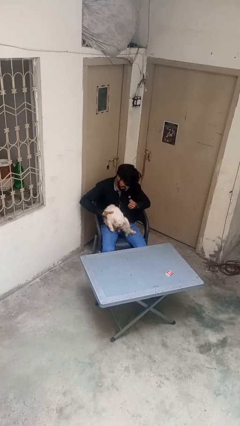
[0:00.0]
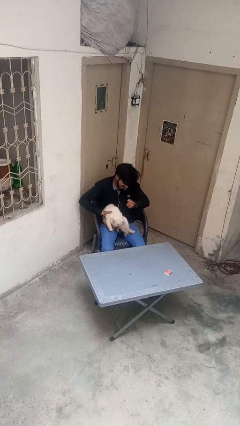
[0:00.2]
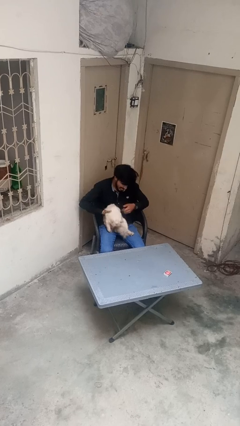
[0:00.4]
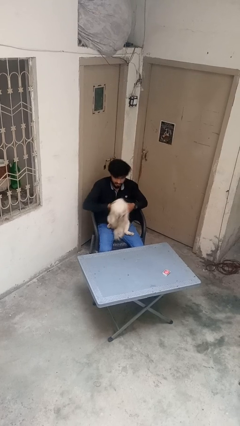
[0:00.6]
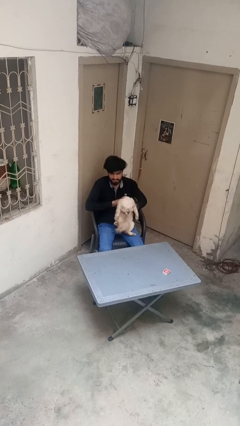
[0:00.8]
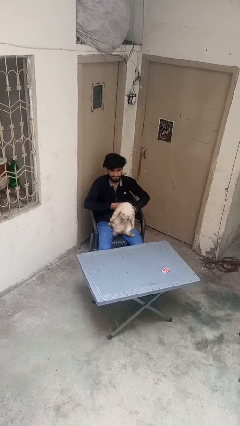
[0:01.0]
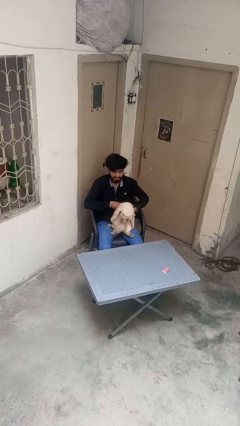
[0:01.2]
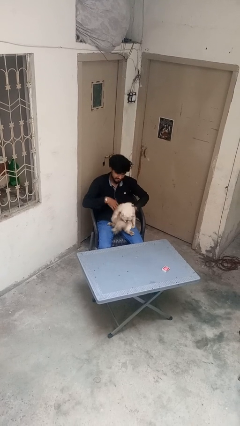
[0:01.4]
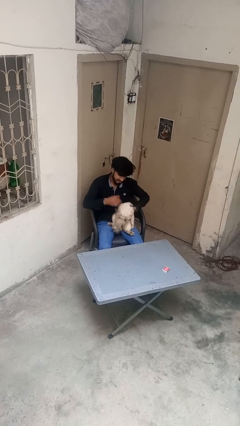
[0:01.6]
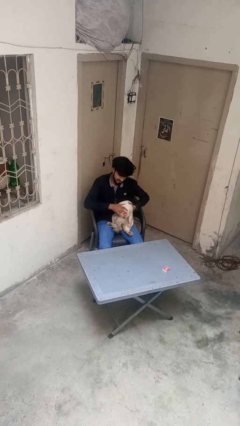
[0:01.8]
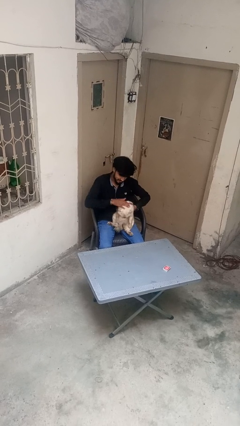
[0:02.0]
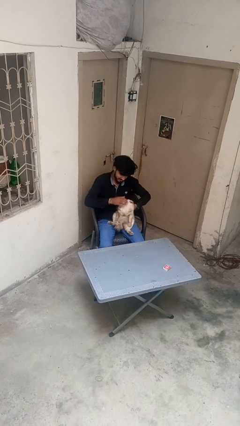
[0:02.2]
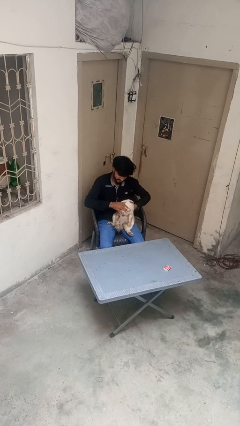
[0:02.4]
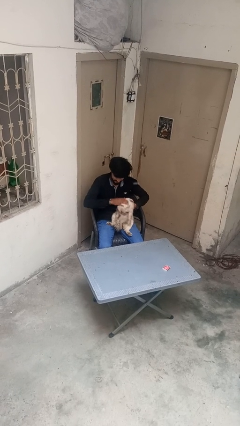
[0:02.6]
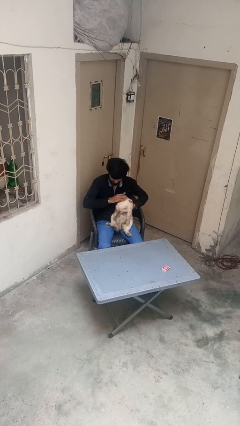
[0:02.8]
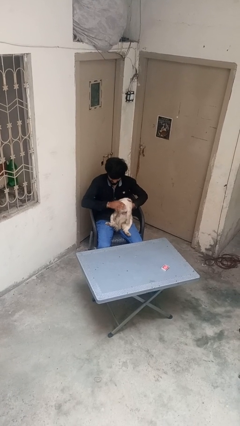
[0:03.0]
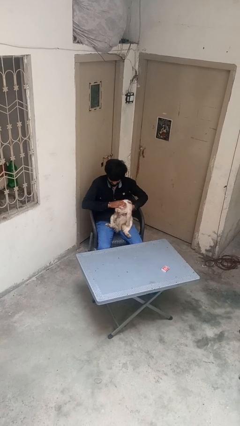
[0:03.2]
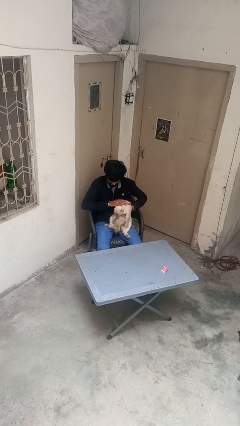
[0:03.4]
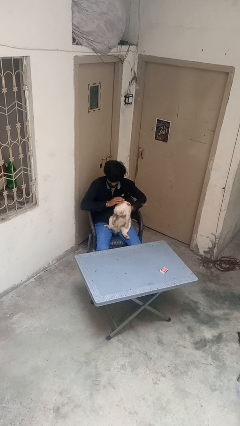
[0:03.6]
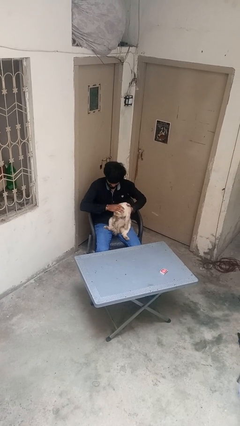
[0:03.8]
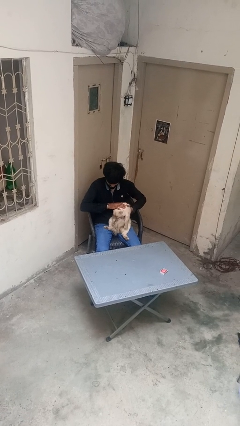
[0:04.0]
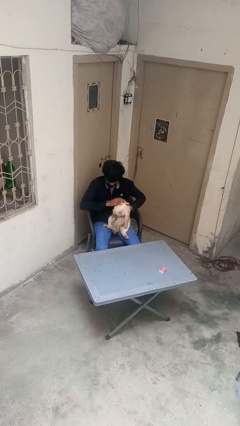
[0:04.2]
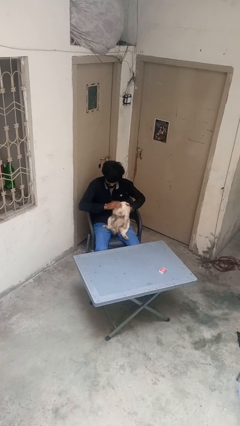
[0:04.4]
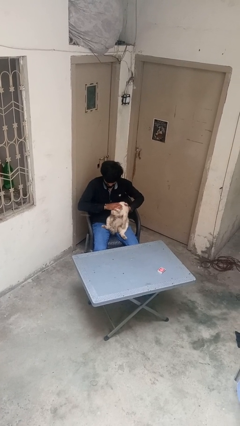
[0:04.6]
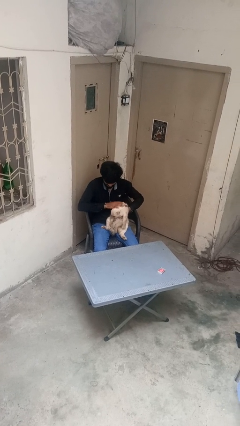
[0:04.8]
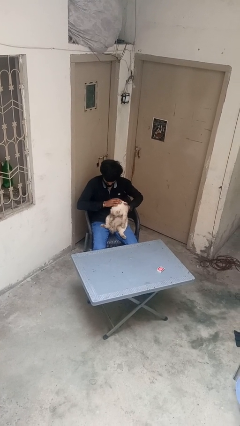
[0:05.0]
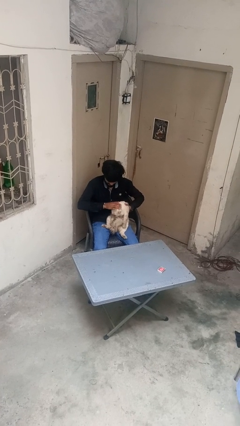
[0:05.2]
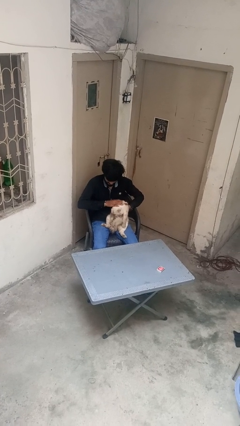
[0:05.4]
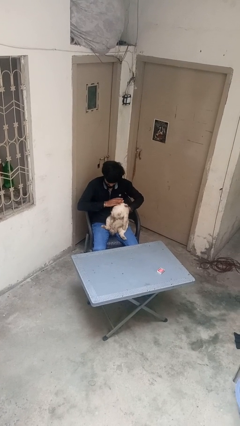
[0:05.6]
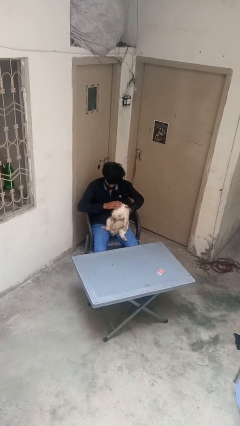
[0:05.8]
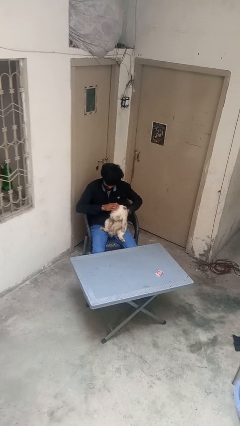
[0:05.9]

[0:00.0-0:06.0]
person pets cat

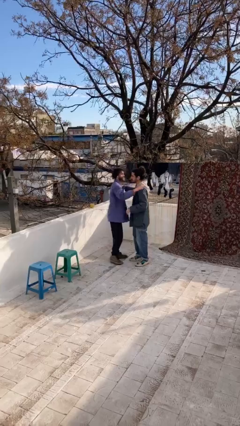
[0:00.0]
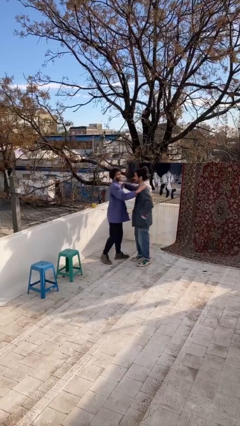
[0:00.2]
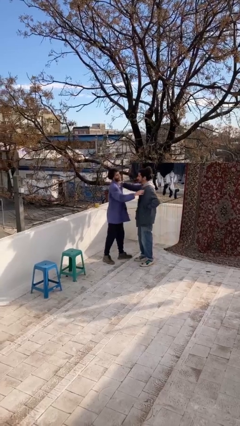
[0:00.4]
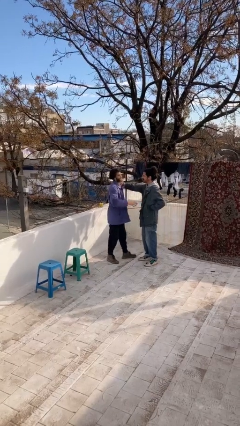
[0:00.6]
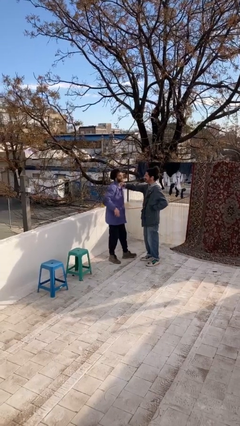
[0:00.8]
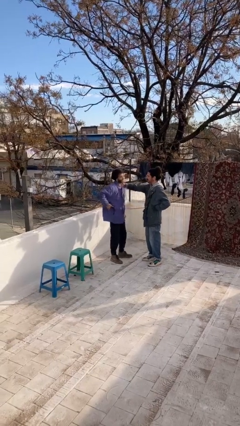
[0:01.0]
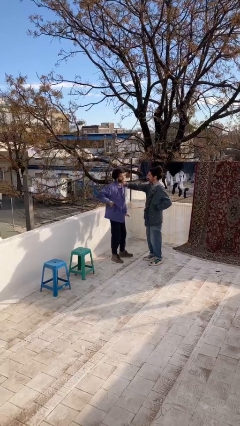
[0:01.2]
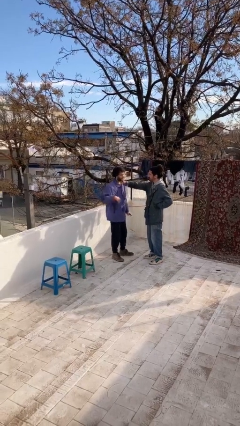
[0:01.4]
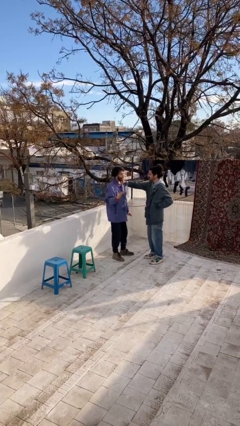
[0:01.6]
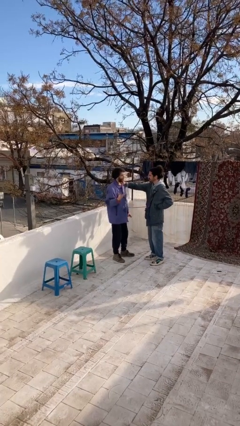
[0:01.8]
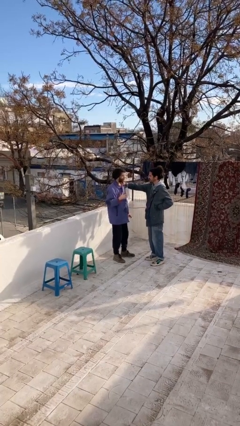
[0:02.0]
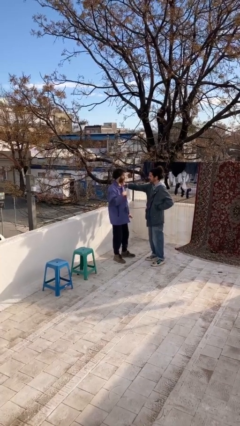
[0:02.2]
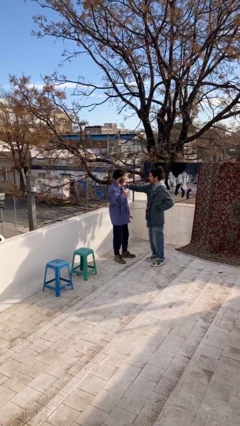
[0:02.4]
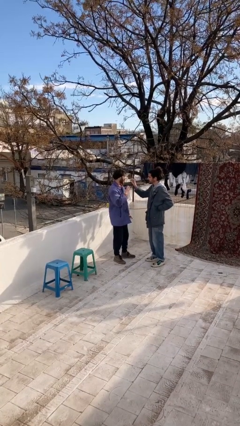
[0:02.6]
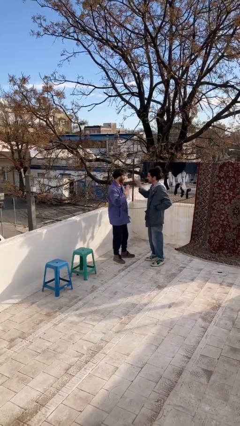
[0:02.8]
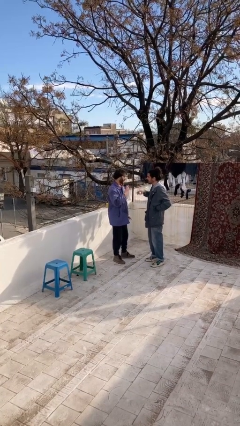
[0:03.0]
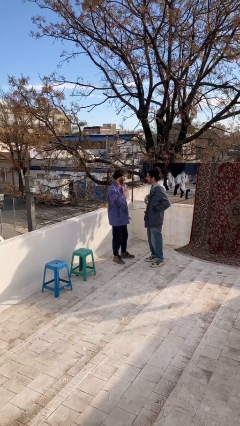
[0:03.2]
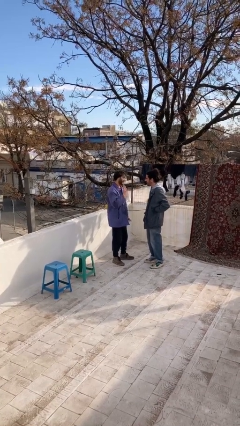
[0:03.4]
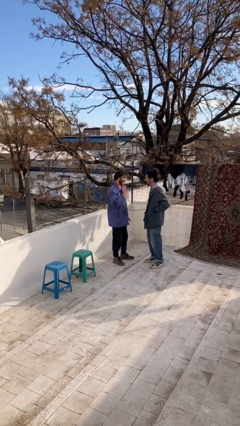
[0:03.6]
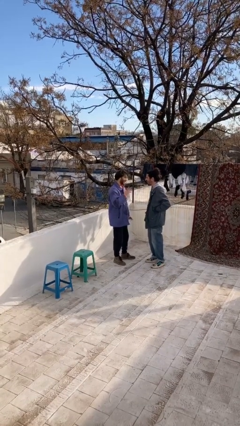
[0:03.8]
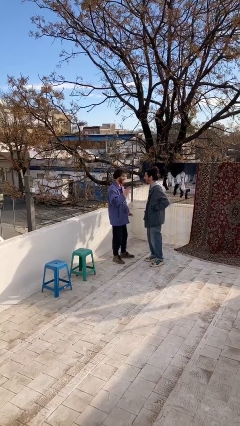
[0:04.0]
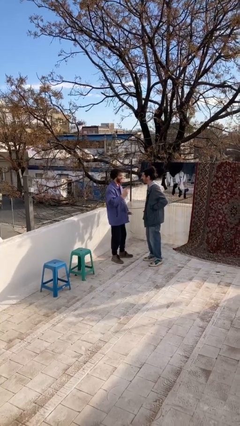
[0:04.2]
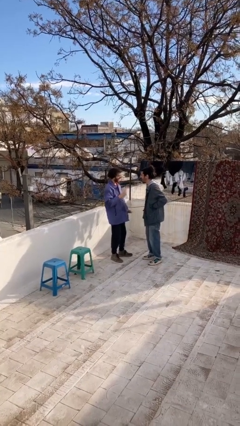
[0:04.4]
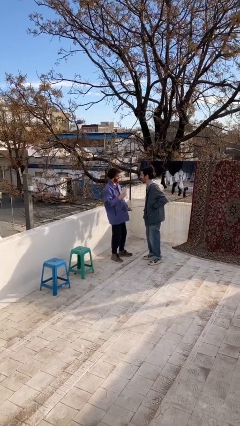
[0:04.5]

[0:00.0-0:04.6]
person talks to person

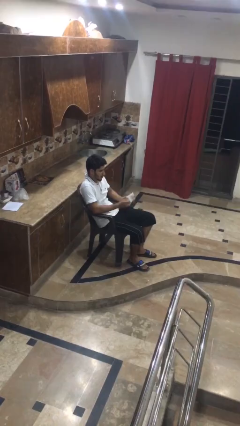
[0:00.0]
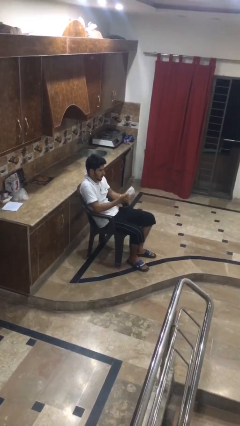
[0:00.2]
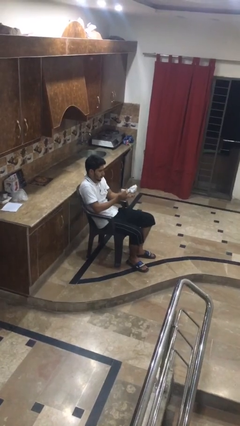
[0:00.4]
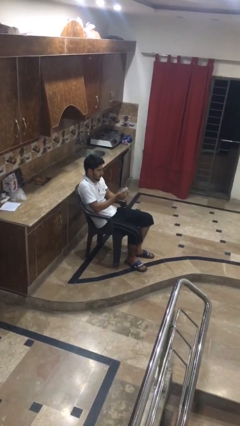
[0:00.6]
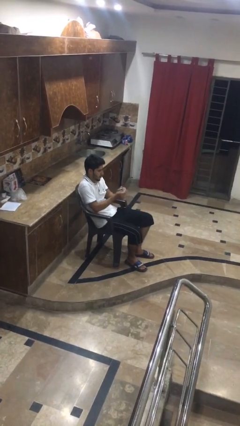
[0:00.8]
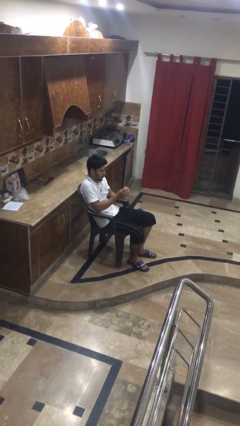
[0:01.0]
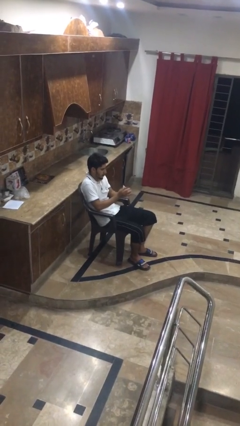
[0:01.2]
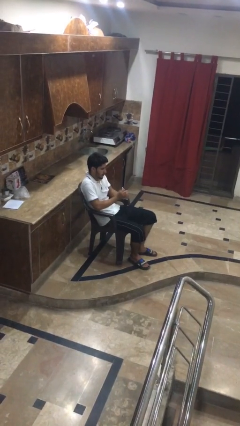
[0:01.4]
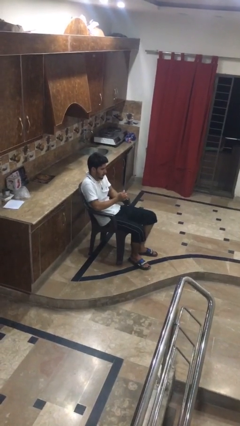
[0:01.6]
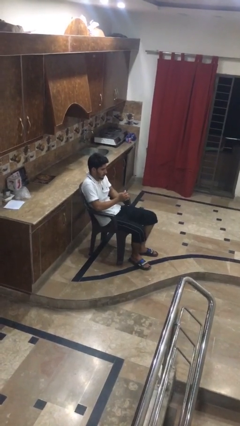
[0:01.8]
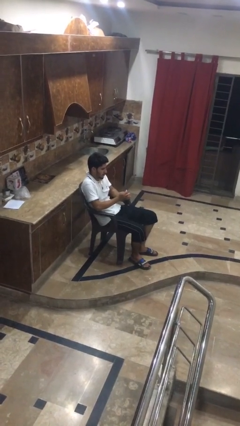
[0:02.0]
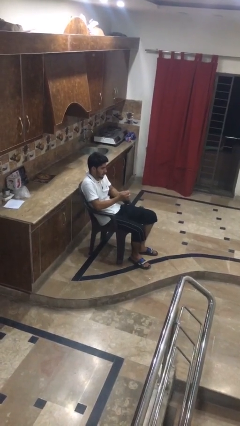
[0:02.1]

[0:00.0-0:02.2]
person crumples paper

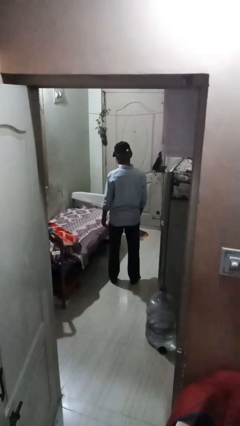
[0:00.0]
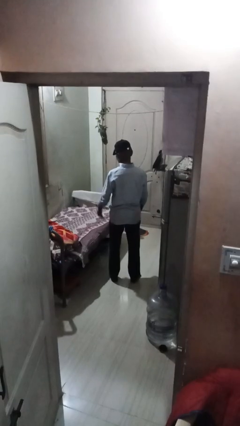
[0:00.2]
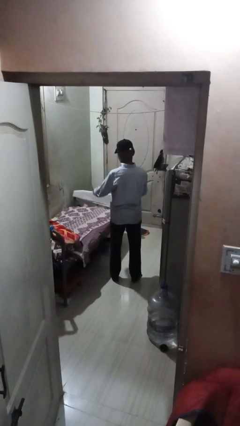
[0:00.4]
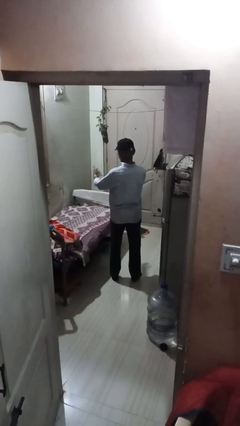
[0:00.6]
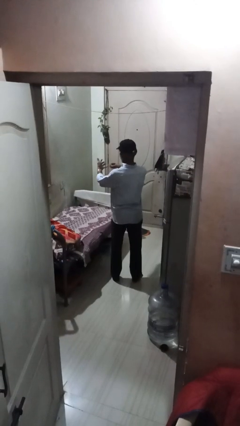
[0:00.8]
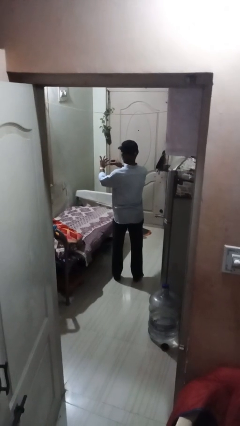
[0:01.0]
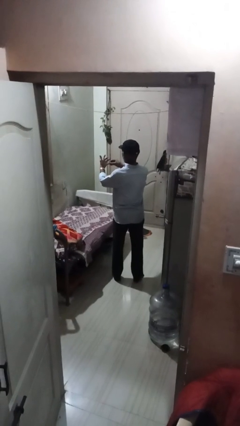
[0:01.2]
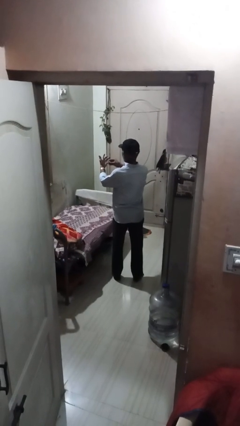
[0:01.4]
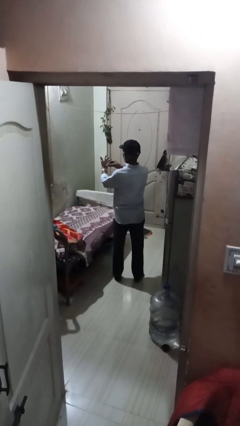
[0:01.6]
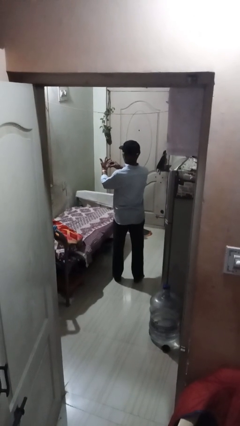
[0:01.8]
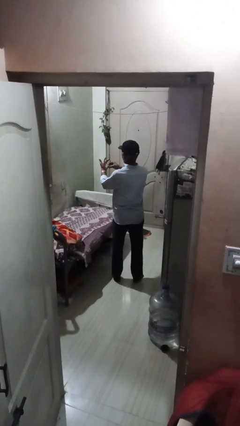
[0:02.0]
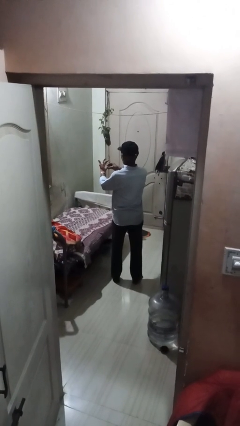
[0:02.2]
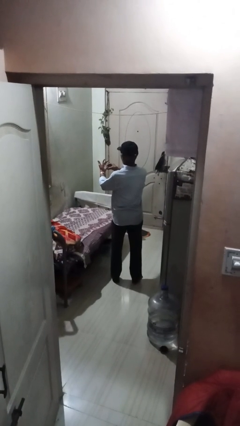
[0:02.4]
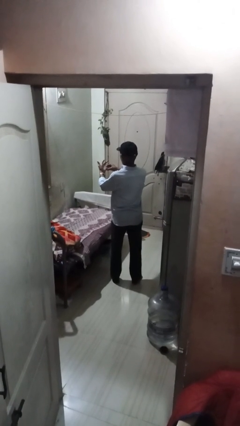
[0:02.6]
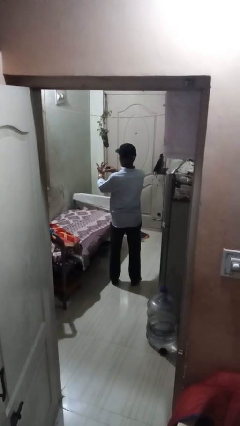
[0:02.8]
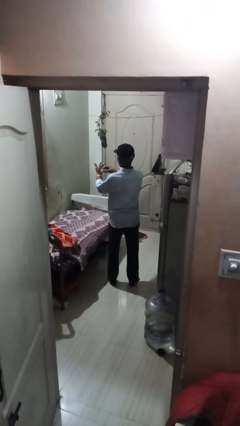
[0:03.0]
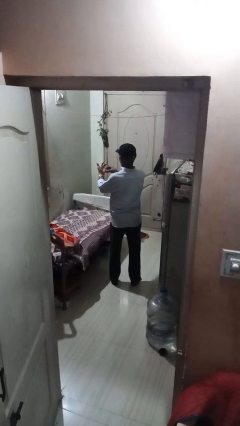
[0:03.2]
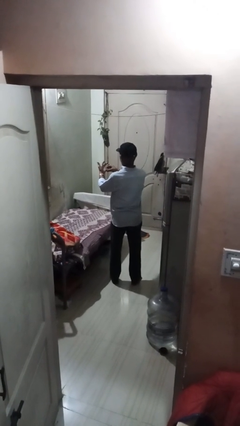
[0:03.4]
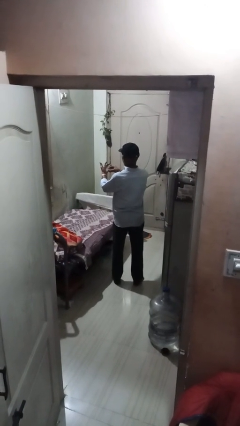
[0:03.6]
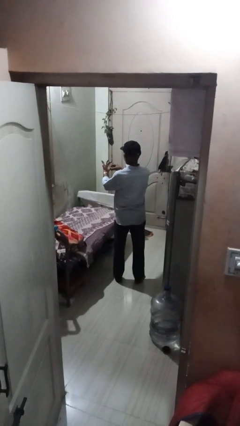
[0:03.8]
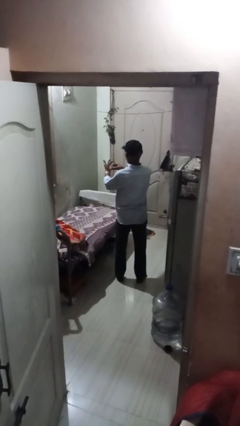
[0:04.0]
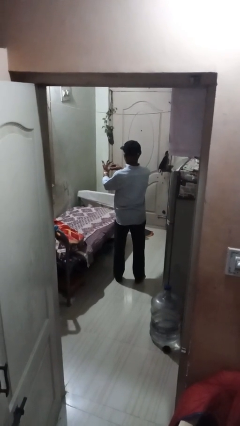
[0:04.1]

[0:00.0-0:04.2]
person puts on ring

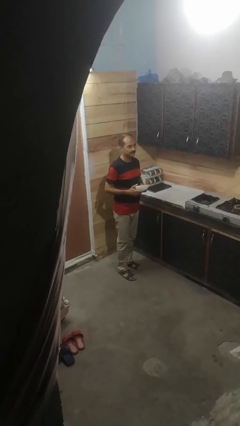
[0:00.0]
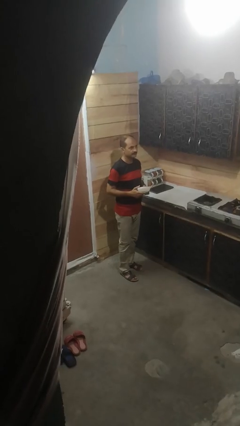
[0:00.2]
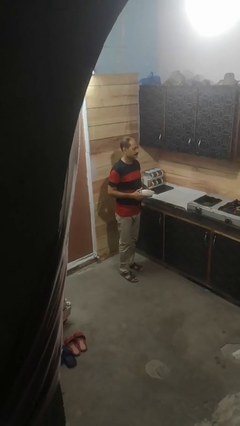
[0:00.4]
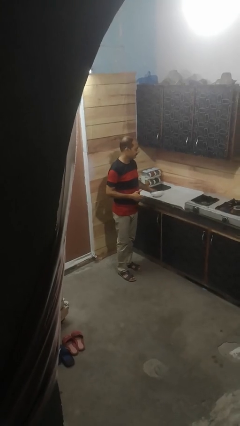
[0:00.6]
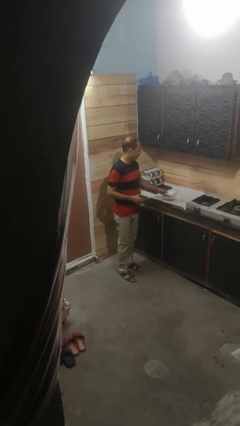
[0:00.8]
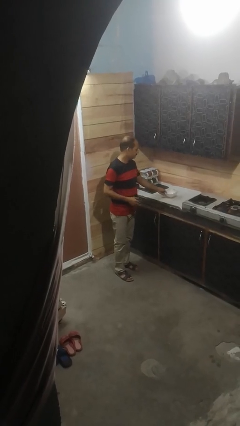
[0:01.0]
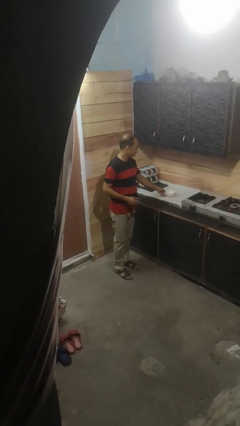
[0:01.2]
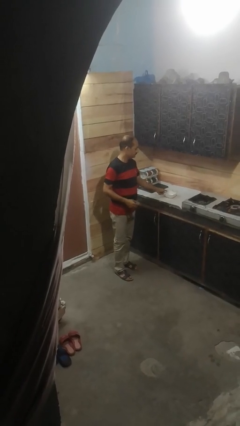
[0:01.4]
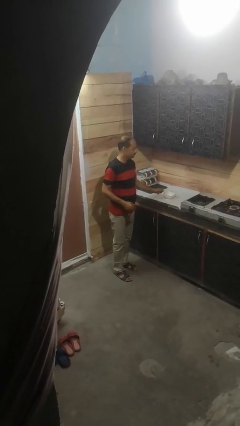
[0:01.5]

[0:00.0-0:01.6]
person puts down object on countertop
